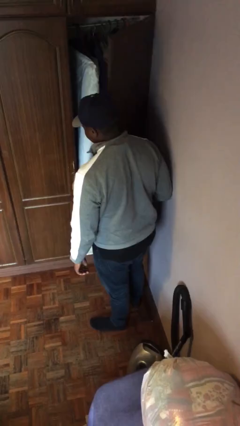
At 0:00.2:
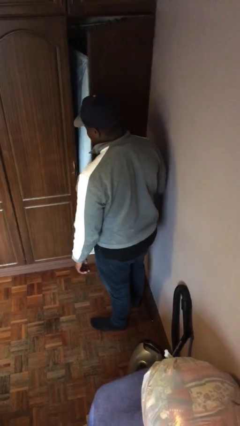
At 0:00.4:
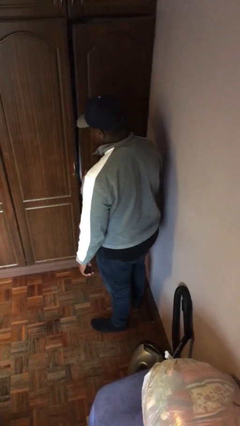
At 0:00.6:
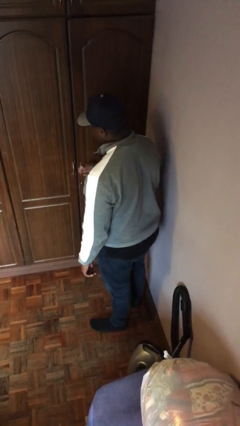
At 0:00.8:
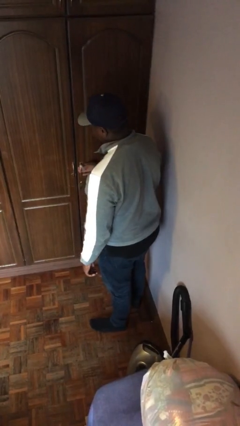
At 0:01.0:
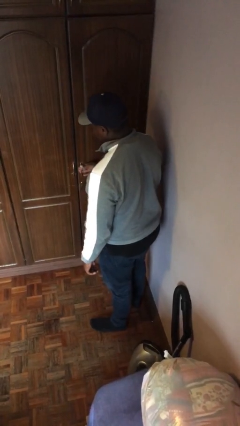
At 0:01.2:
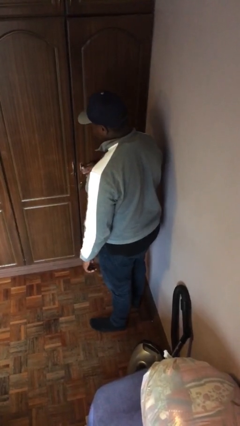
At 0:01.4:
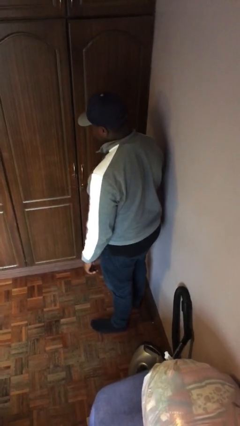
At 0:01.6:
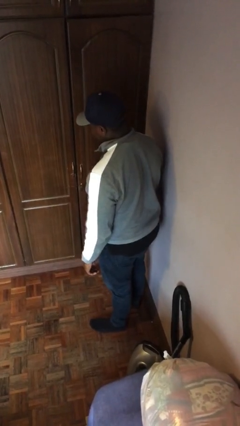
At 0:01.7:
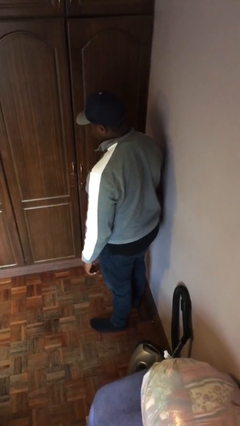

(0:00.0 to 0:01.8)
person closes closet door

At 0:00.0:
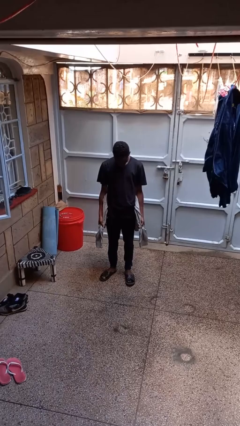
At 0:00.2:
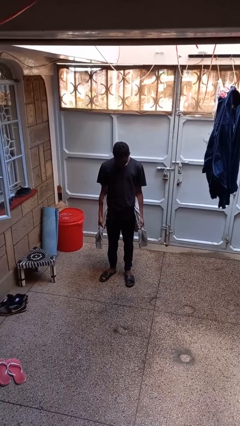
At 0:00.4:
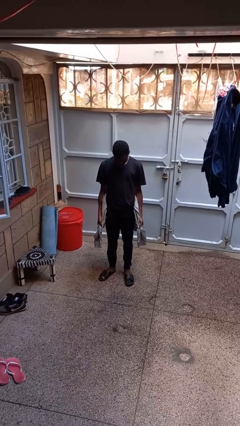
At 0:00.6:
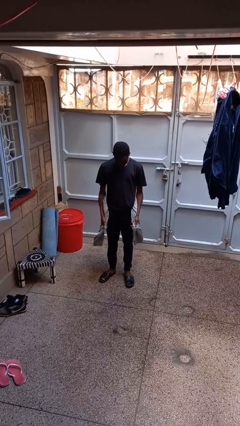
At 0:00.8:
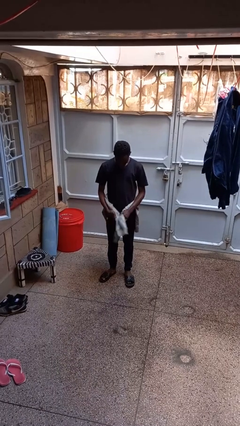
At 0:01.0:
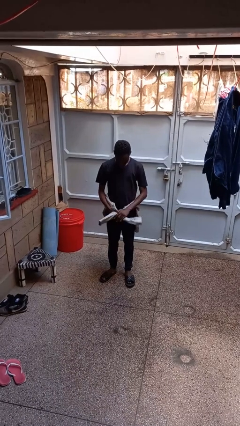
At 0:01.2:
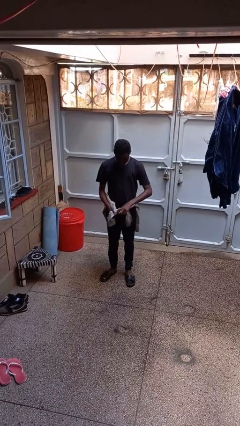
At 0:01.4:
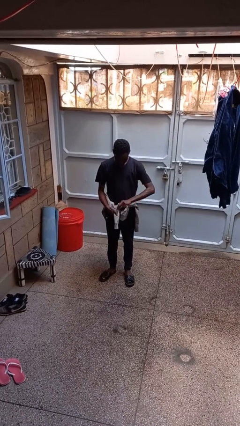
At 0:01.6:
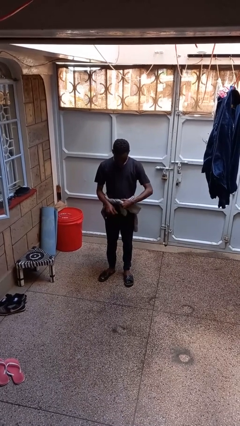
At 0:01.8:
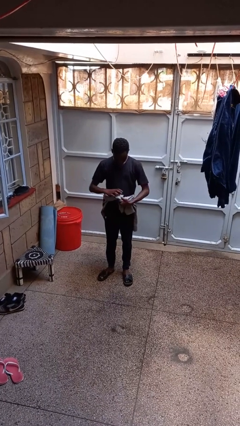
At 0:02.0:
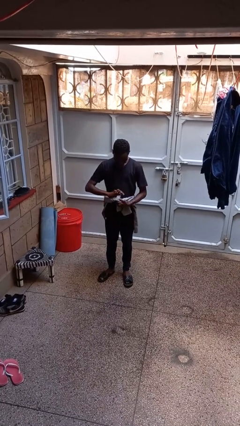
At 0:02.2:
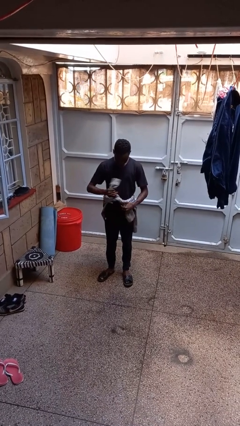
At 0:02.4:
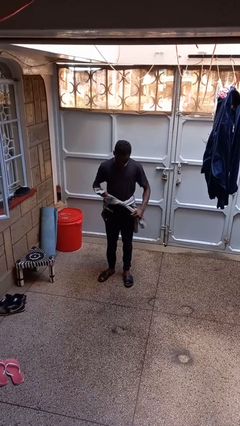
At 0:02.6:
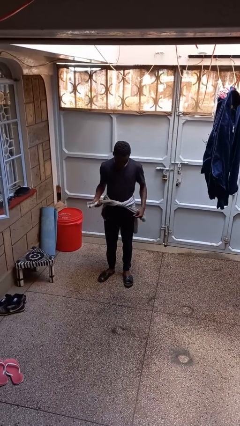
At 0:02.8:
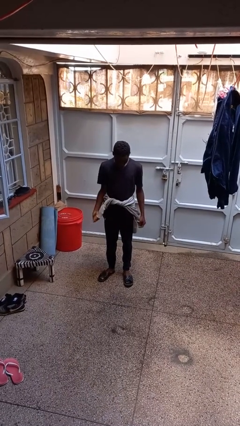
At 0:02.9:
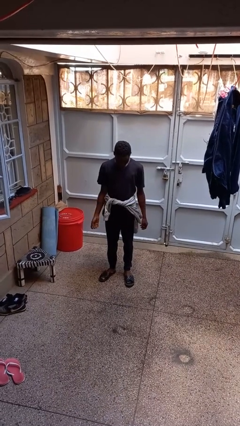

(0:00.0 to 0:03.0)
person ties jacket around waist

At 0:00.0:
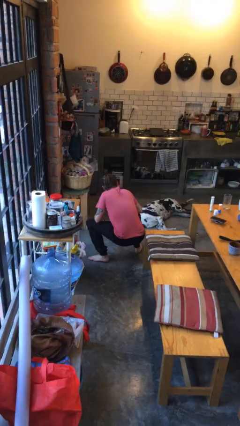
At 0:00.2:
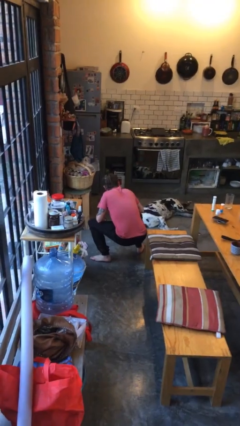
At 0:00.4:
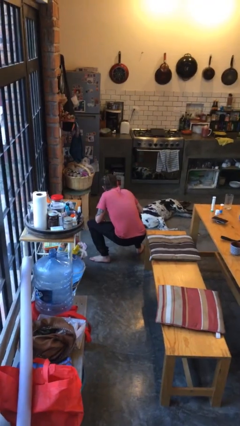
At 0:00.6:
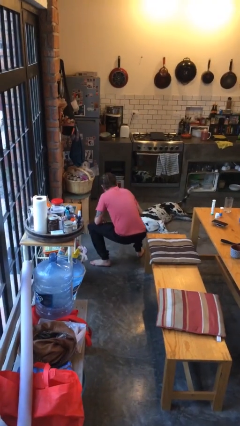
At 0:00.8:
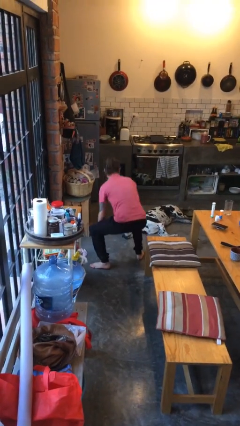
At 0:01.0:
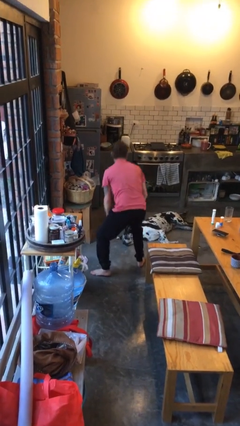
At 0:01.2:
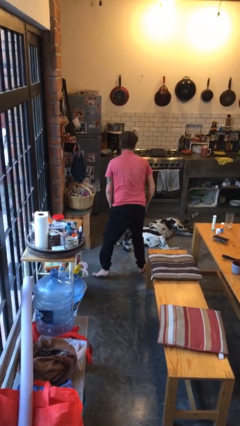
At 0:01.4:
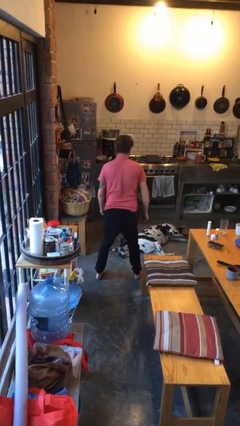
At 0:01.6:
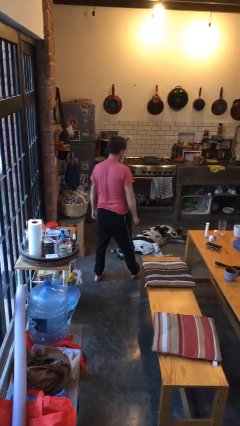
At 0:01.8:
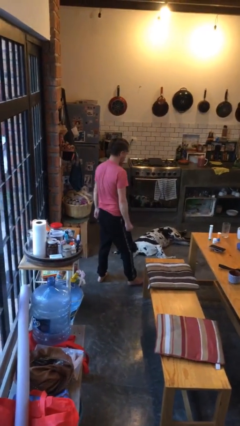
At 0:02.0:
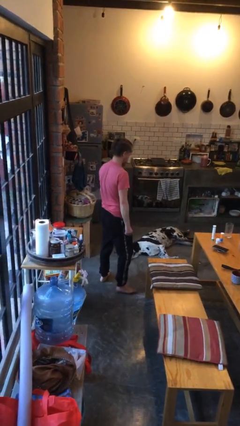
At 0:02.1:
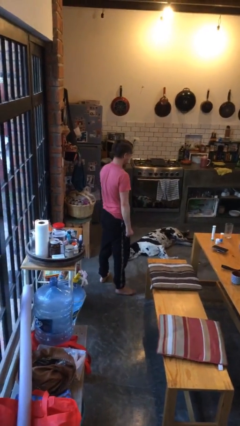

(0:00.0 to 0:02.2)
person stands up

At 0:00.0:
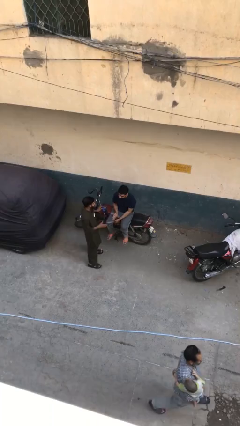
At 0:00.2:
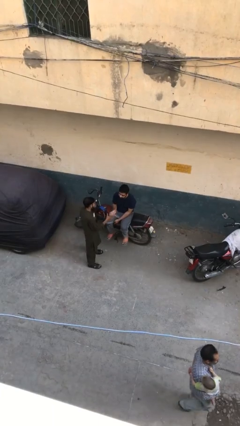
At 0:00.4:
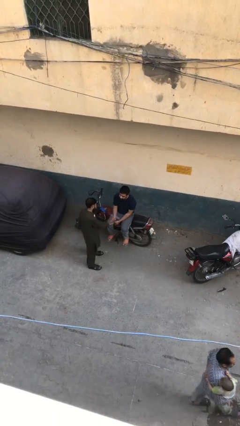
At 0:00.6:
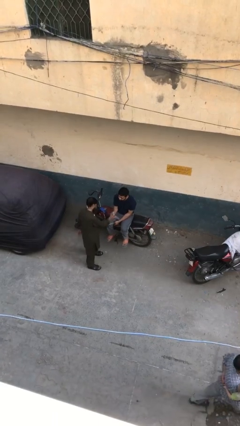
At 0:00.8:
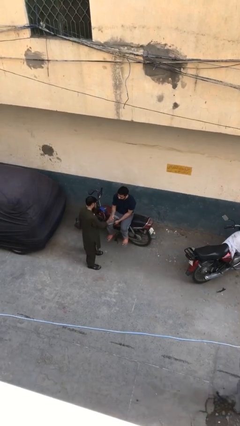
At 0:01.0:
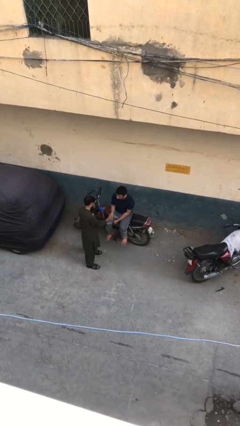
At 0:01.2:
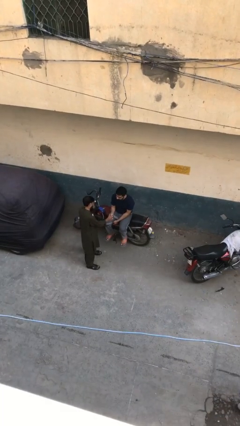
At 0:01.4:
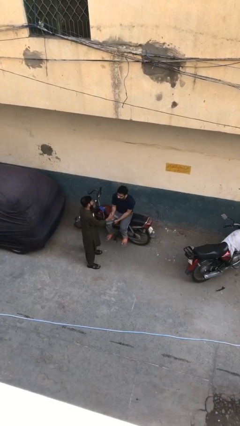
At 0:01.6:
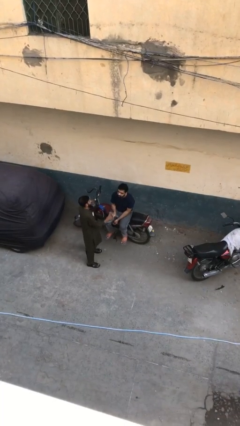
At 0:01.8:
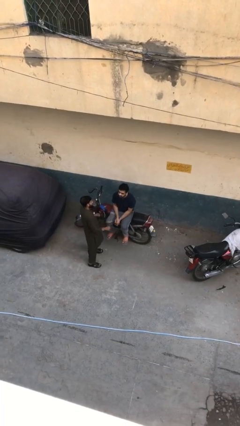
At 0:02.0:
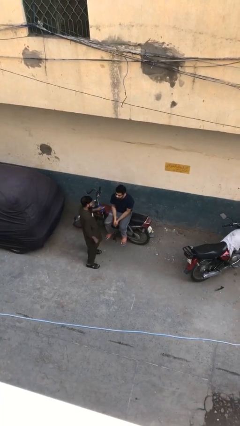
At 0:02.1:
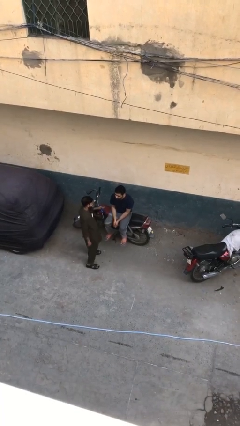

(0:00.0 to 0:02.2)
person shakes hand

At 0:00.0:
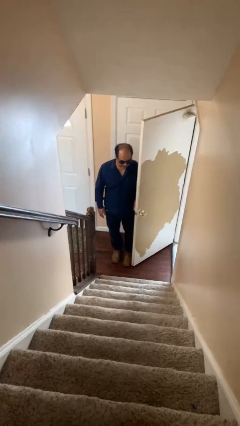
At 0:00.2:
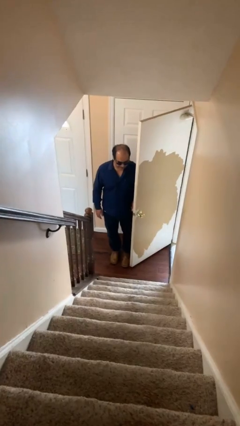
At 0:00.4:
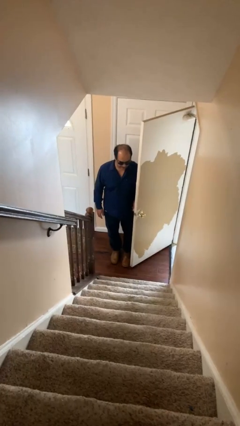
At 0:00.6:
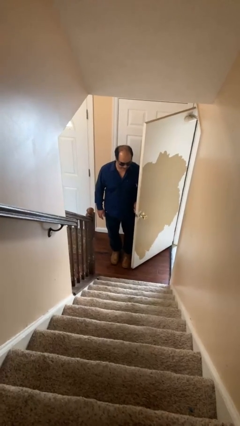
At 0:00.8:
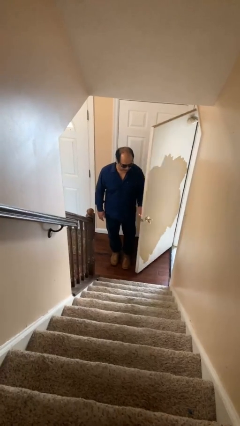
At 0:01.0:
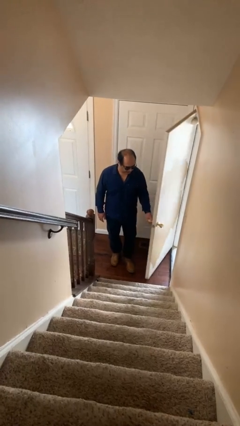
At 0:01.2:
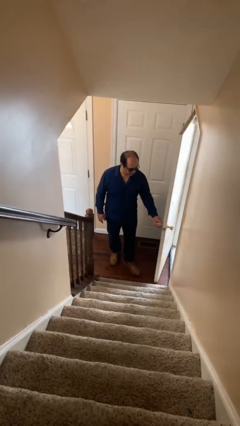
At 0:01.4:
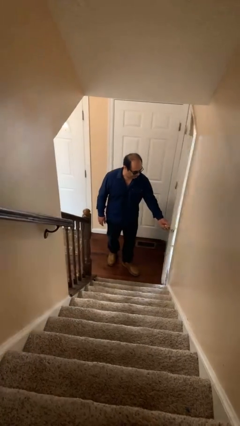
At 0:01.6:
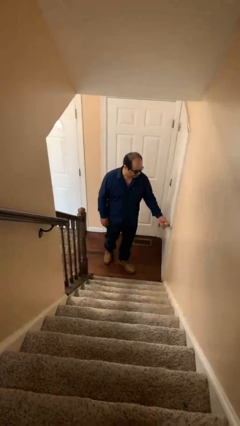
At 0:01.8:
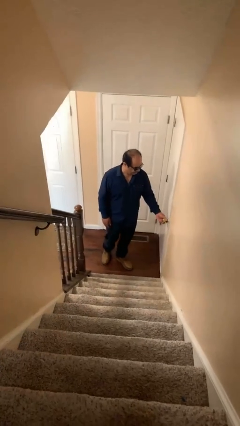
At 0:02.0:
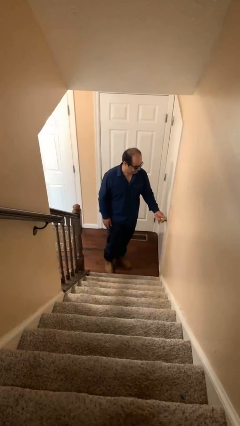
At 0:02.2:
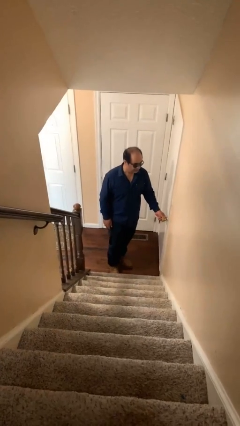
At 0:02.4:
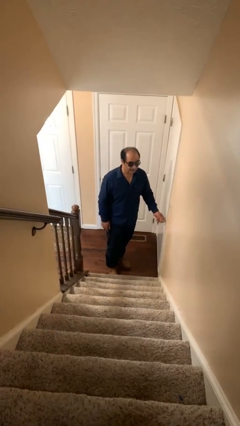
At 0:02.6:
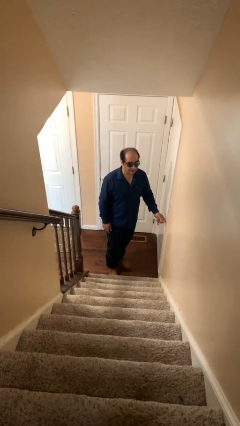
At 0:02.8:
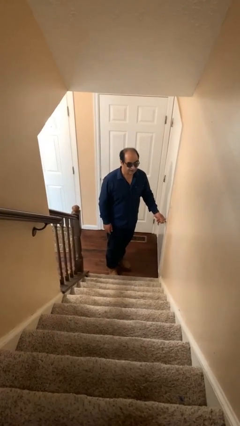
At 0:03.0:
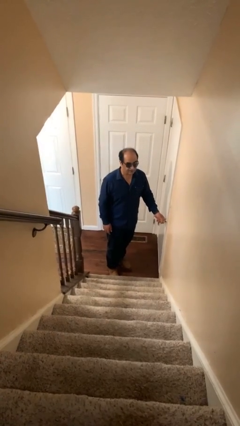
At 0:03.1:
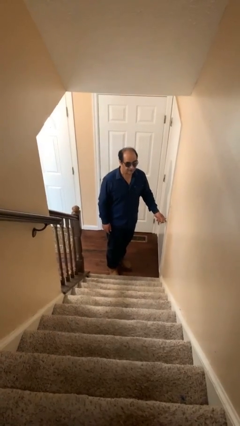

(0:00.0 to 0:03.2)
person closes facility door

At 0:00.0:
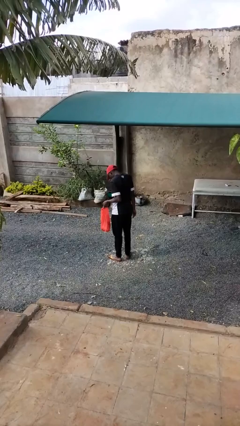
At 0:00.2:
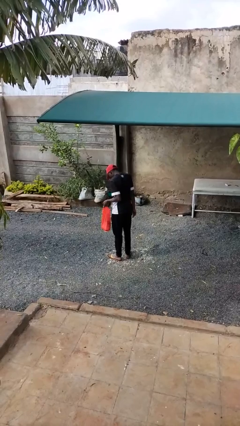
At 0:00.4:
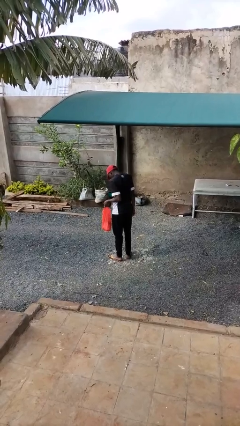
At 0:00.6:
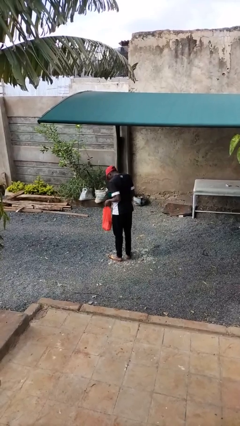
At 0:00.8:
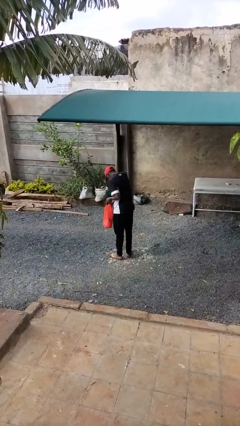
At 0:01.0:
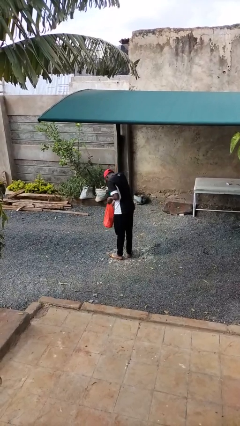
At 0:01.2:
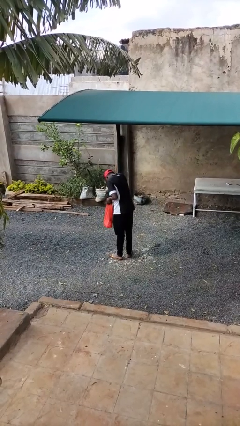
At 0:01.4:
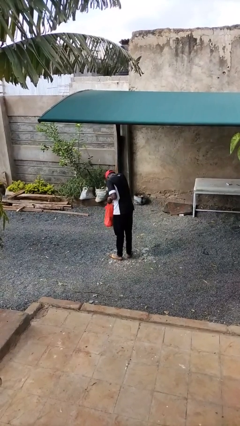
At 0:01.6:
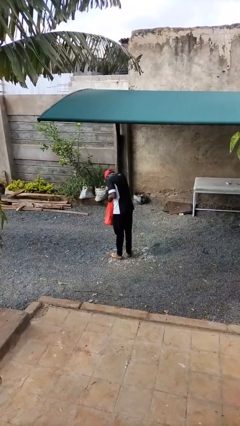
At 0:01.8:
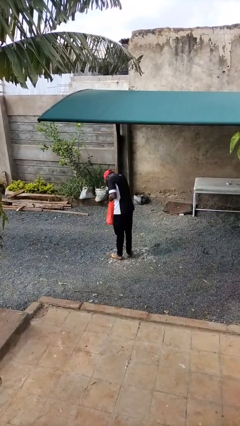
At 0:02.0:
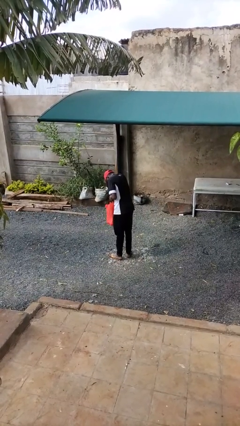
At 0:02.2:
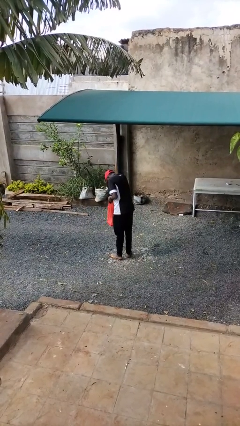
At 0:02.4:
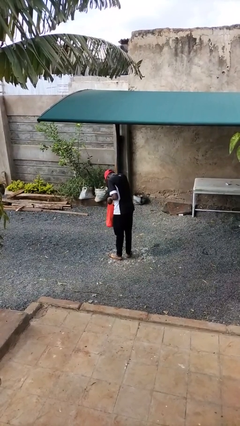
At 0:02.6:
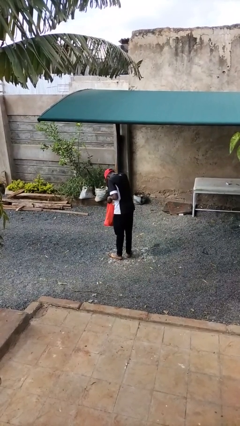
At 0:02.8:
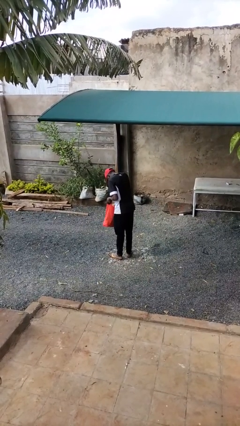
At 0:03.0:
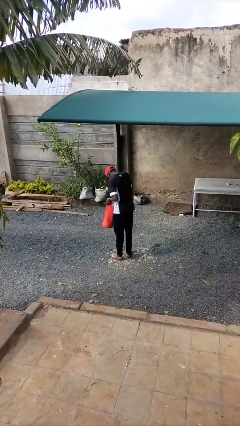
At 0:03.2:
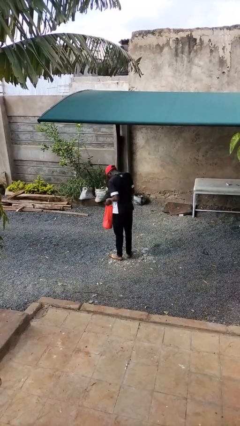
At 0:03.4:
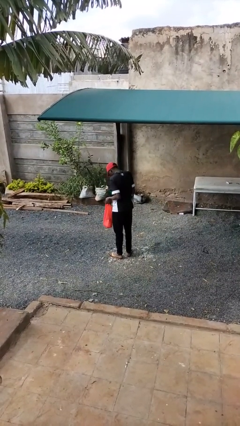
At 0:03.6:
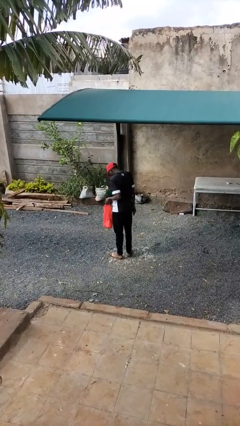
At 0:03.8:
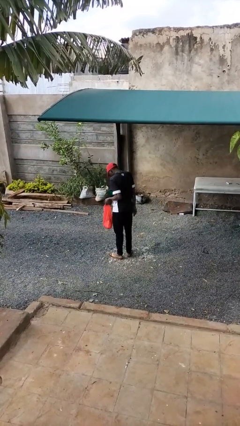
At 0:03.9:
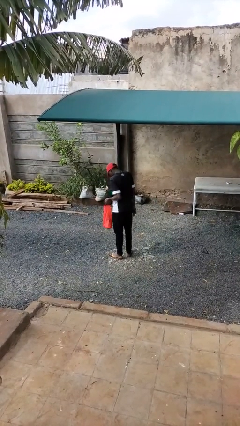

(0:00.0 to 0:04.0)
person searches in bag

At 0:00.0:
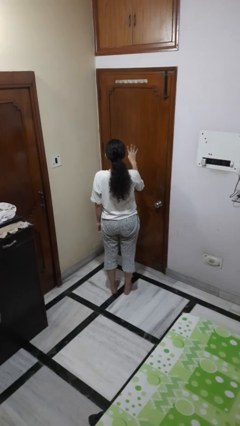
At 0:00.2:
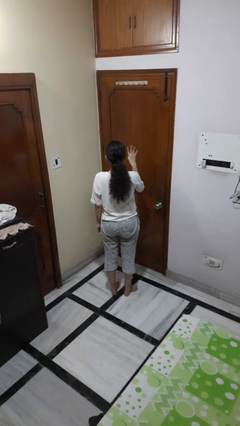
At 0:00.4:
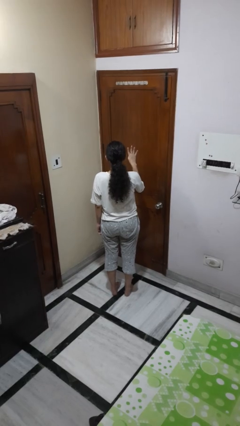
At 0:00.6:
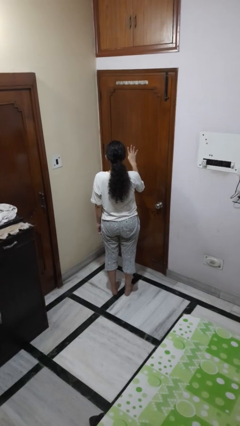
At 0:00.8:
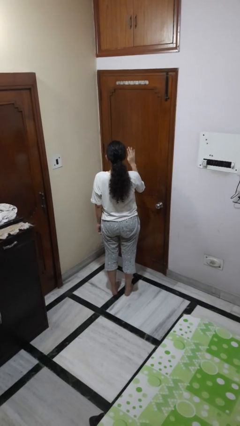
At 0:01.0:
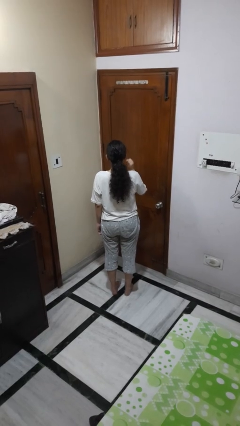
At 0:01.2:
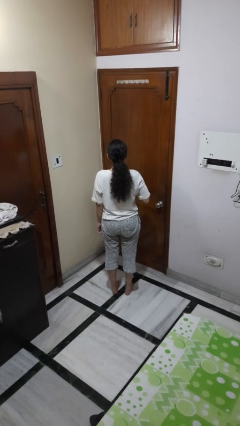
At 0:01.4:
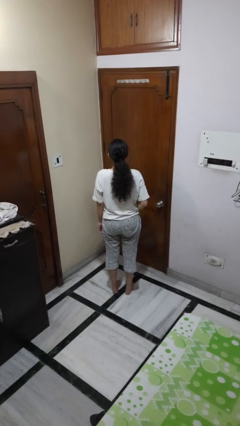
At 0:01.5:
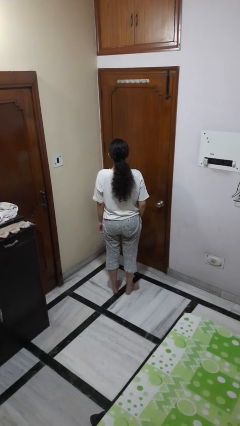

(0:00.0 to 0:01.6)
person gestures number four
